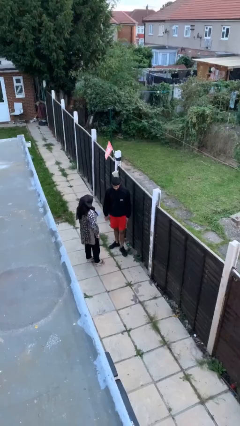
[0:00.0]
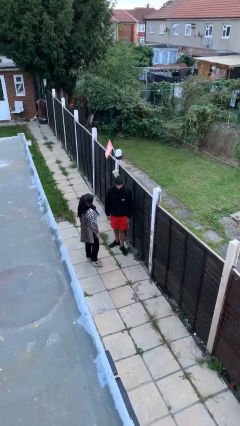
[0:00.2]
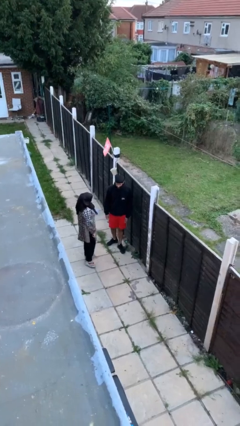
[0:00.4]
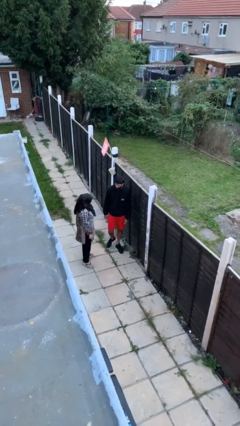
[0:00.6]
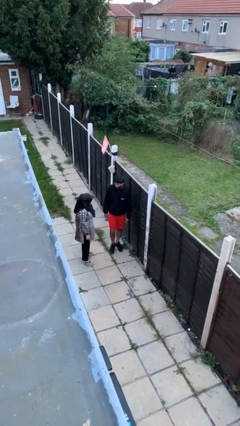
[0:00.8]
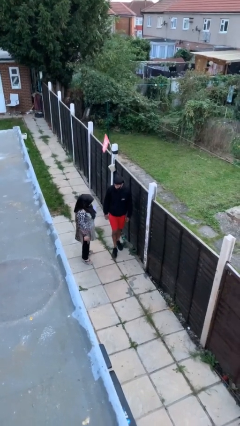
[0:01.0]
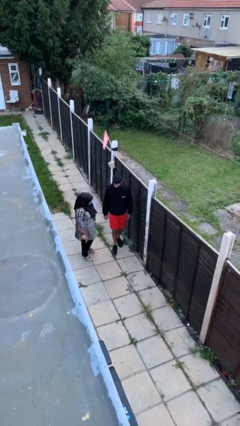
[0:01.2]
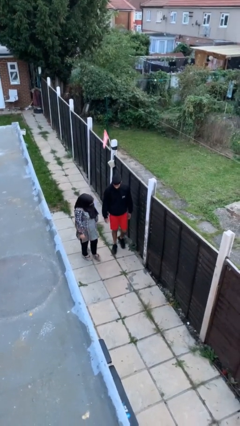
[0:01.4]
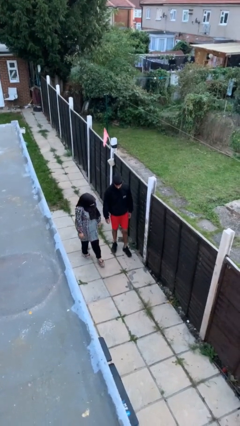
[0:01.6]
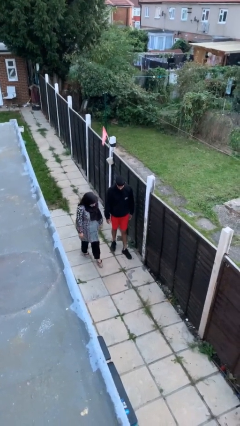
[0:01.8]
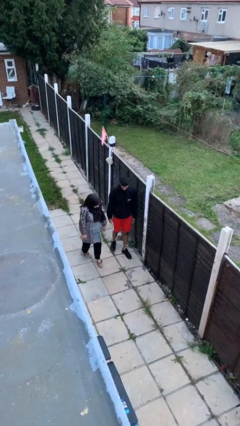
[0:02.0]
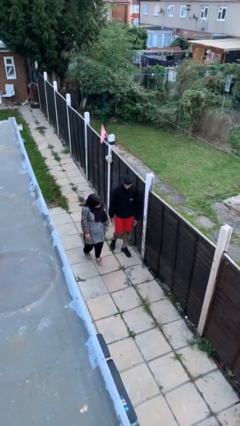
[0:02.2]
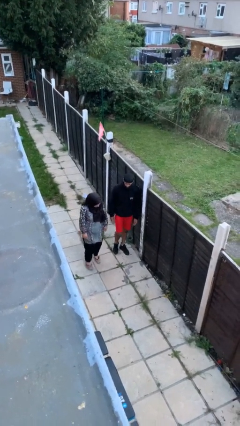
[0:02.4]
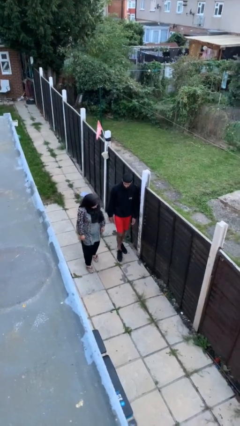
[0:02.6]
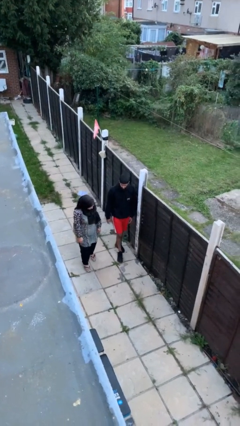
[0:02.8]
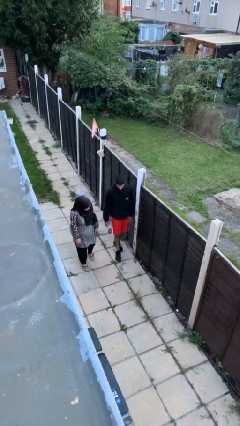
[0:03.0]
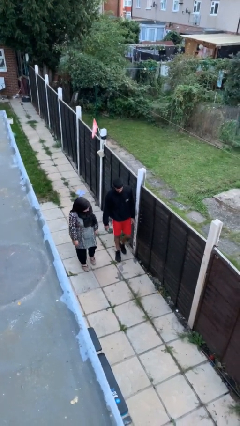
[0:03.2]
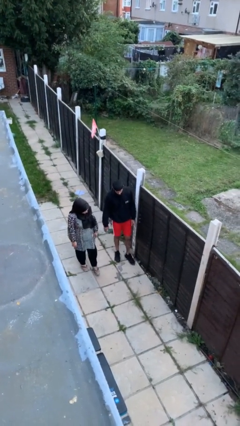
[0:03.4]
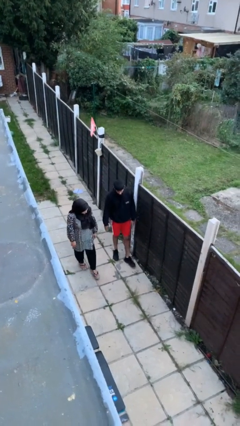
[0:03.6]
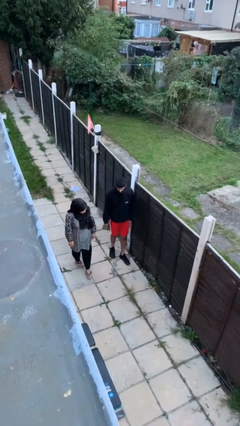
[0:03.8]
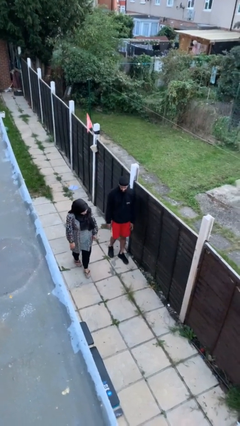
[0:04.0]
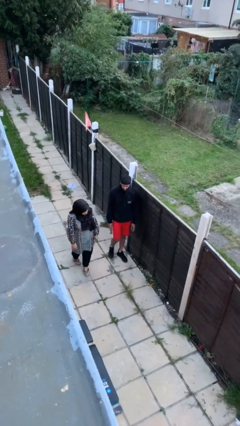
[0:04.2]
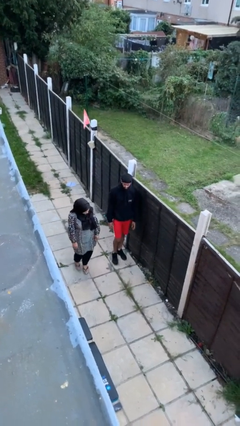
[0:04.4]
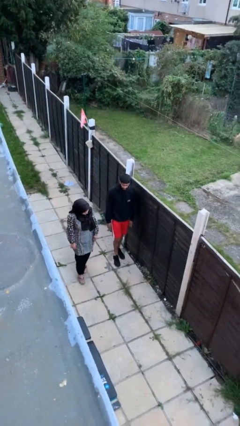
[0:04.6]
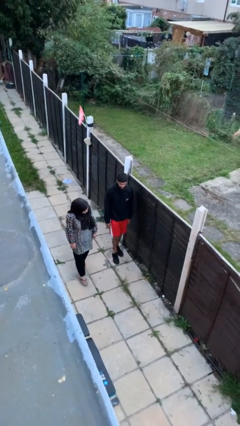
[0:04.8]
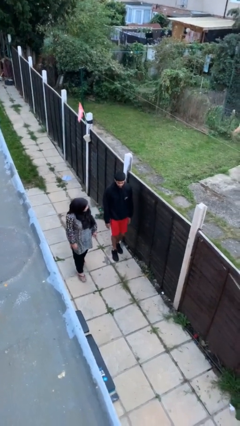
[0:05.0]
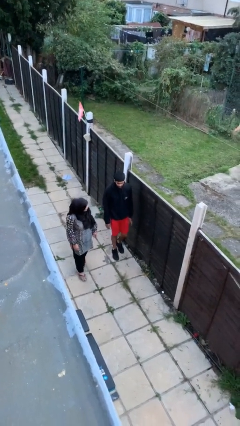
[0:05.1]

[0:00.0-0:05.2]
person talks to person

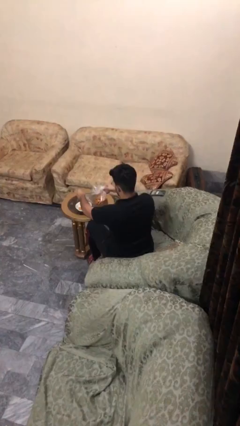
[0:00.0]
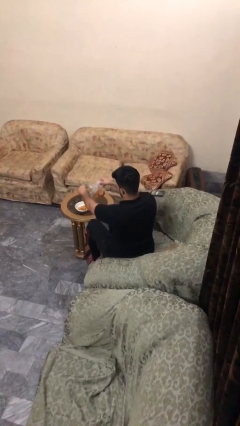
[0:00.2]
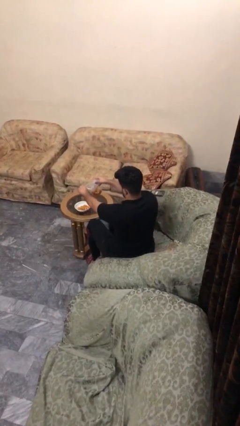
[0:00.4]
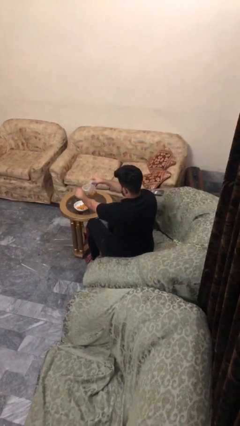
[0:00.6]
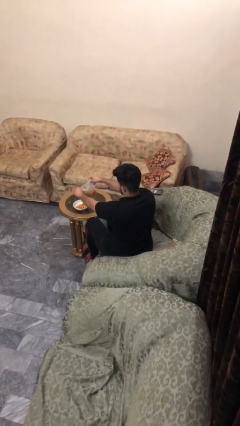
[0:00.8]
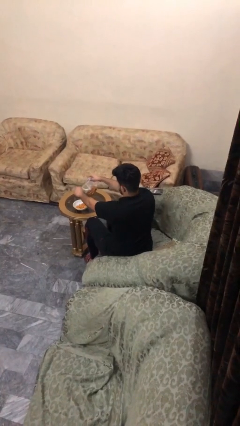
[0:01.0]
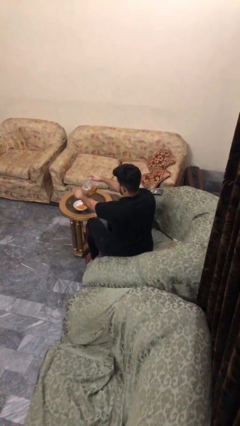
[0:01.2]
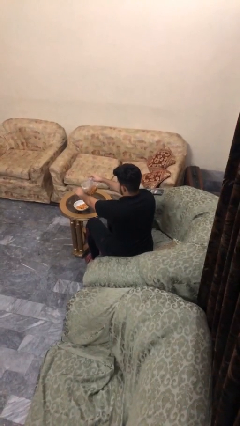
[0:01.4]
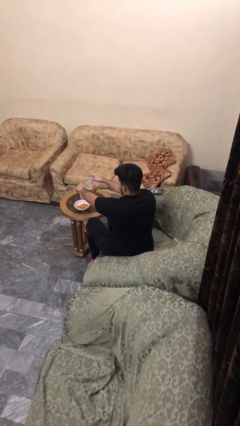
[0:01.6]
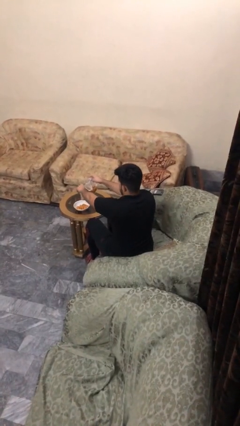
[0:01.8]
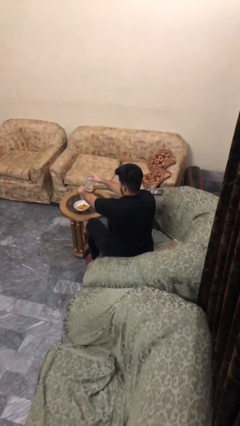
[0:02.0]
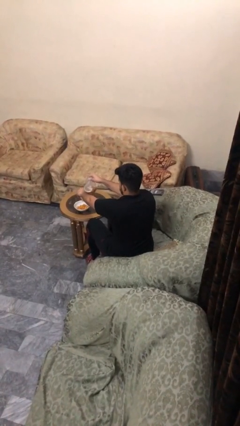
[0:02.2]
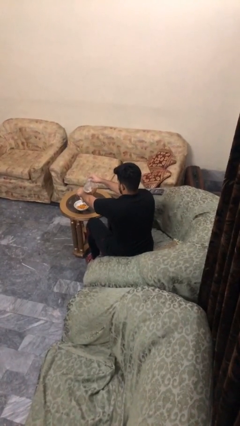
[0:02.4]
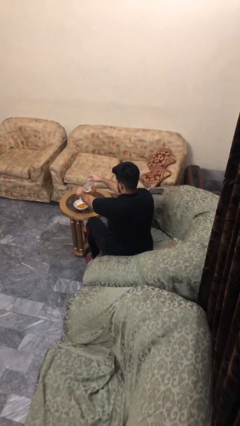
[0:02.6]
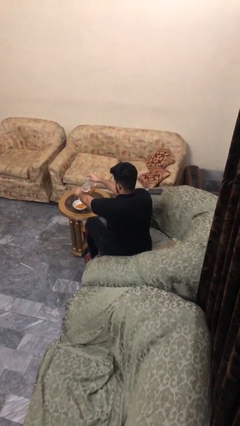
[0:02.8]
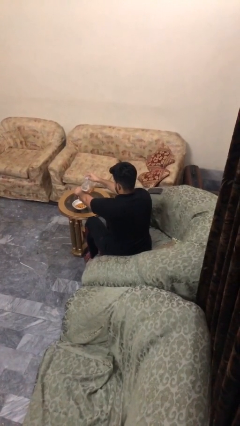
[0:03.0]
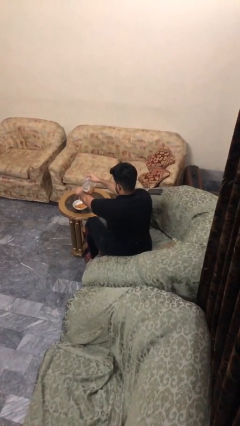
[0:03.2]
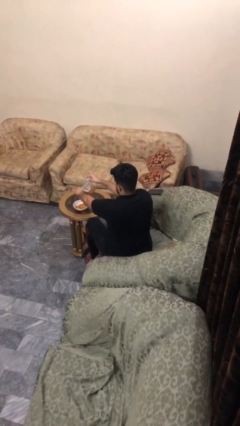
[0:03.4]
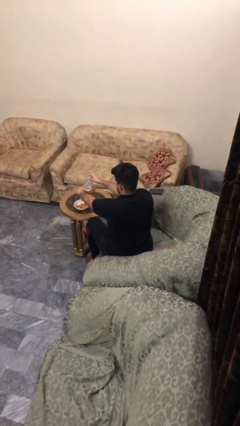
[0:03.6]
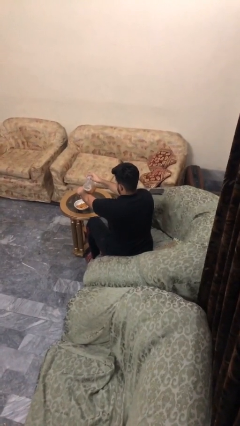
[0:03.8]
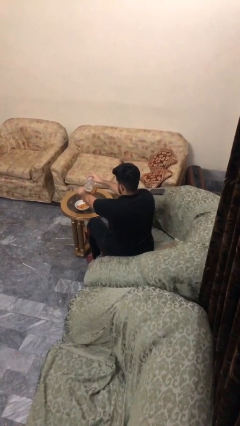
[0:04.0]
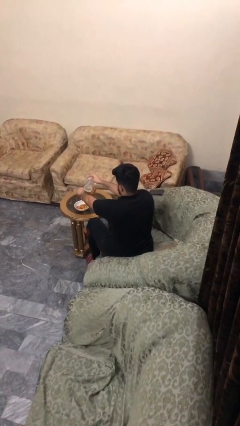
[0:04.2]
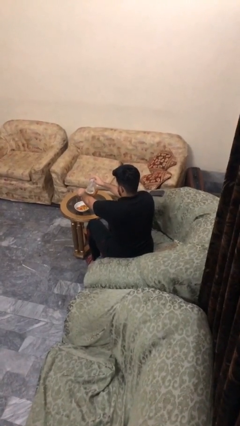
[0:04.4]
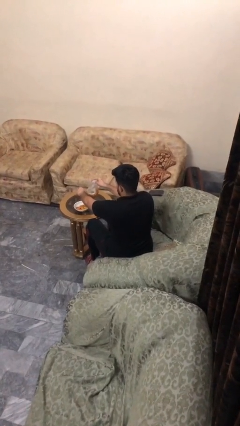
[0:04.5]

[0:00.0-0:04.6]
person pours into bowl

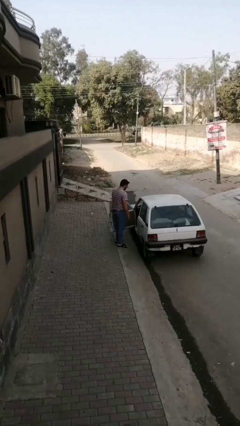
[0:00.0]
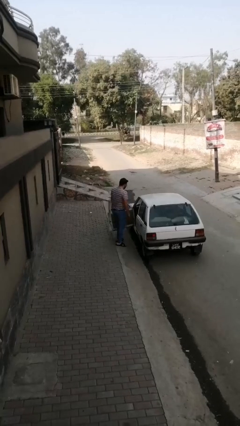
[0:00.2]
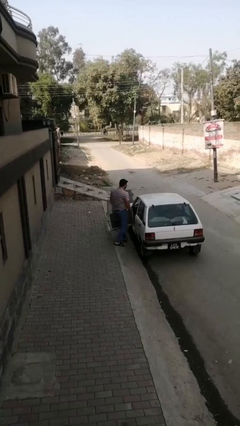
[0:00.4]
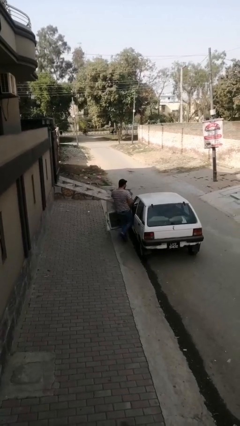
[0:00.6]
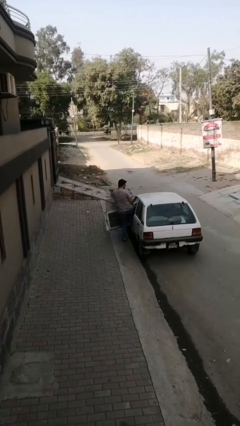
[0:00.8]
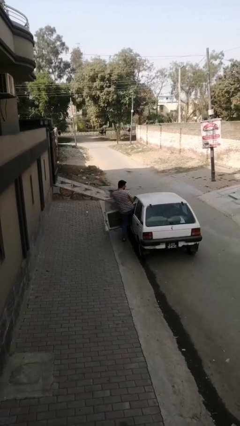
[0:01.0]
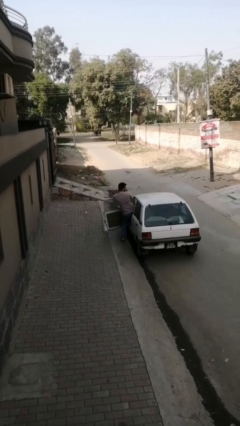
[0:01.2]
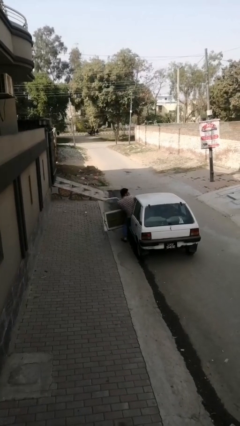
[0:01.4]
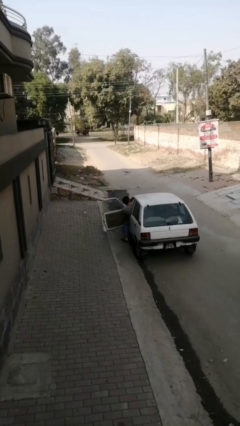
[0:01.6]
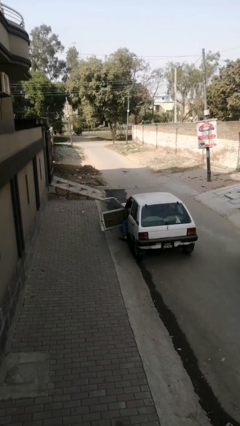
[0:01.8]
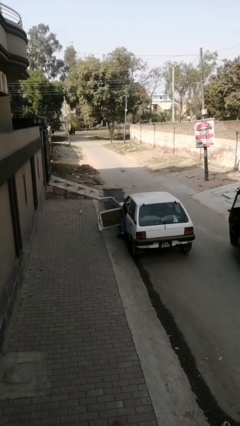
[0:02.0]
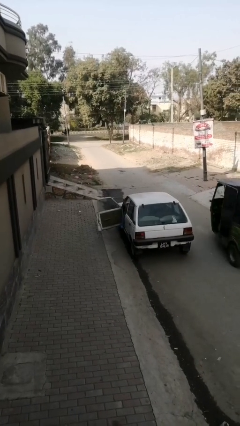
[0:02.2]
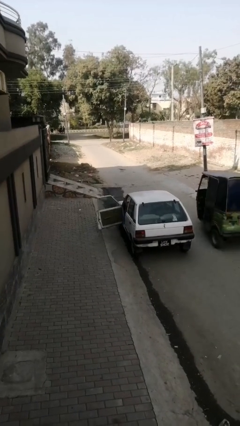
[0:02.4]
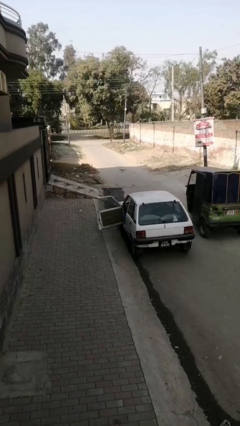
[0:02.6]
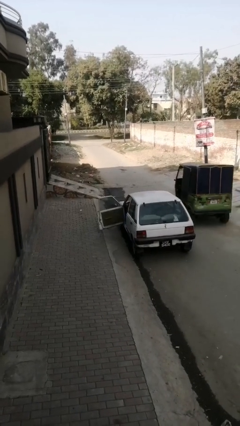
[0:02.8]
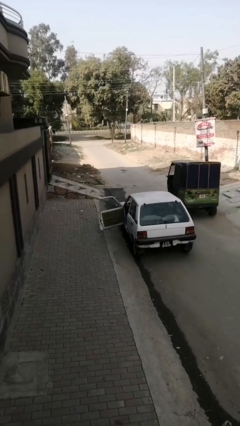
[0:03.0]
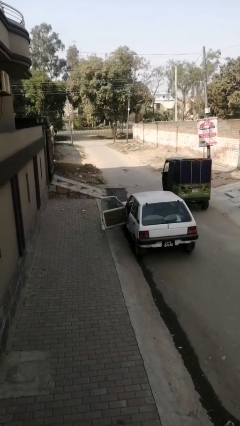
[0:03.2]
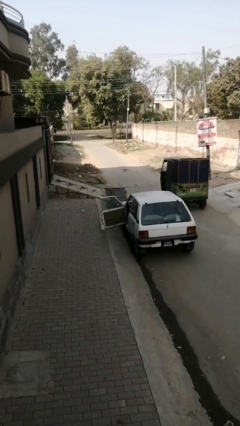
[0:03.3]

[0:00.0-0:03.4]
person enters car

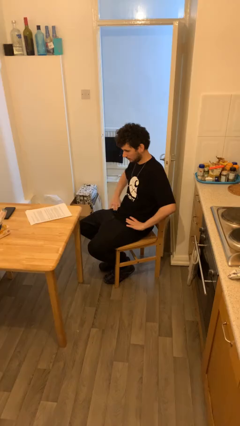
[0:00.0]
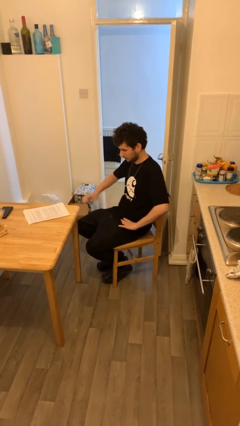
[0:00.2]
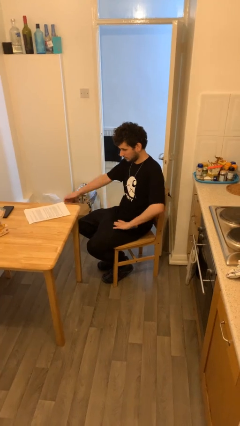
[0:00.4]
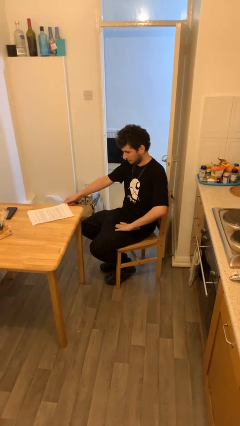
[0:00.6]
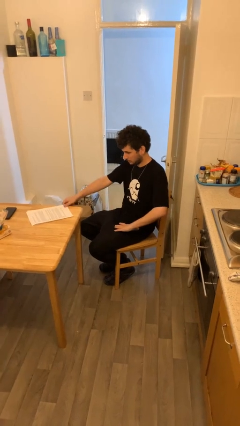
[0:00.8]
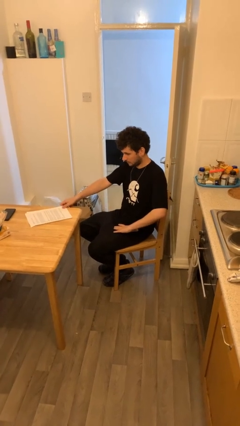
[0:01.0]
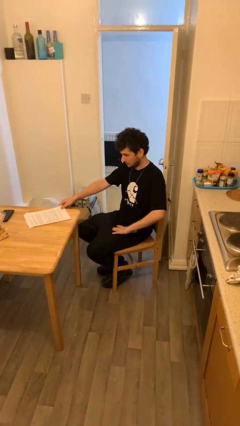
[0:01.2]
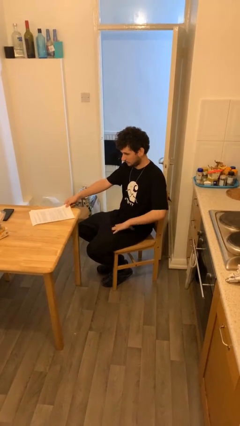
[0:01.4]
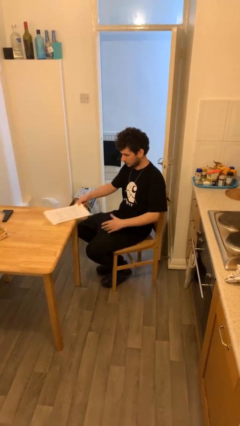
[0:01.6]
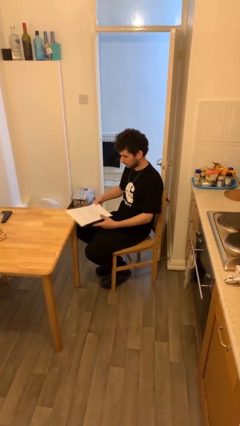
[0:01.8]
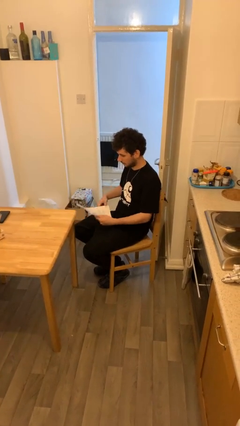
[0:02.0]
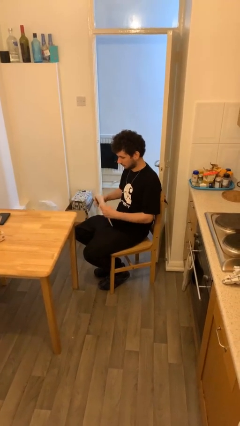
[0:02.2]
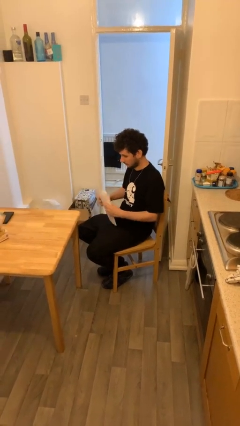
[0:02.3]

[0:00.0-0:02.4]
person picks up object from table

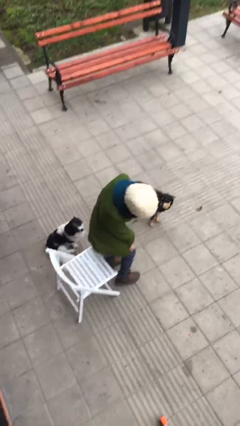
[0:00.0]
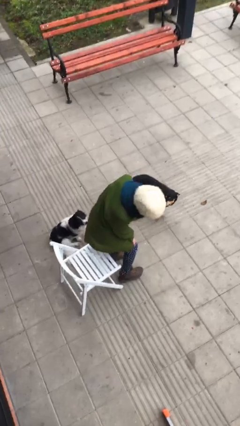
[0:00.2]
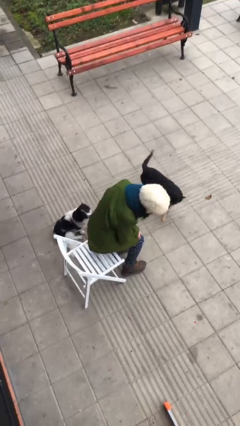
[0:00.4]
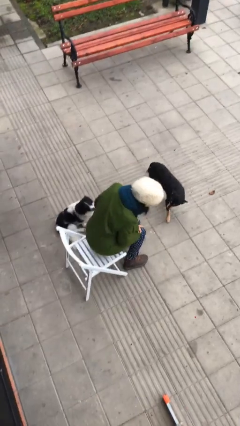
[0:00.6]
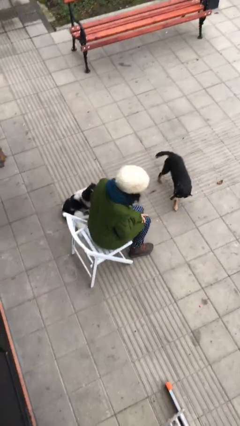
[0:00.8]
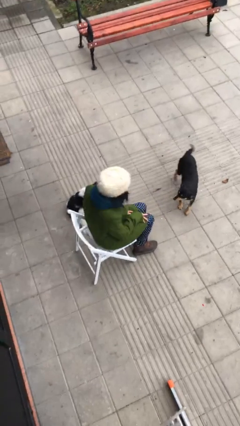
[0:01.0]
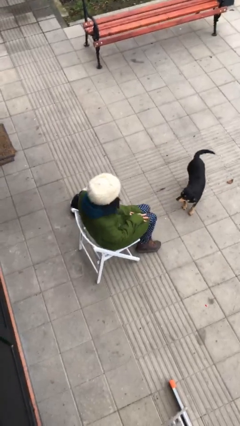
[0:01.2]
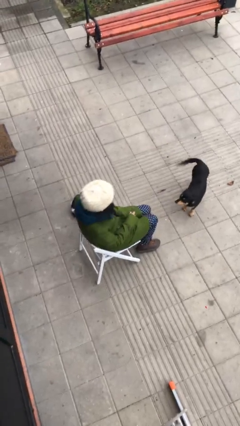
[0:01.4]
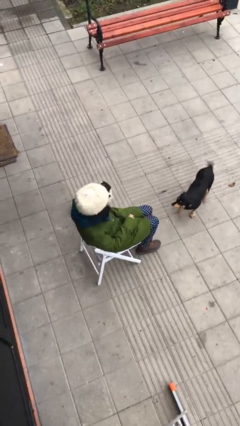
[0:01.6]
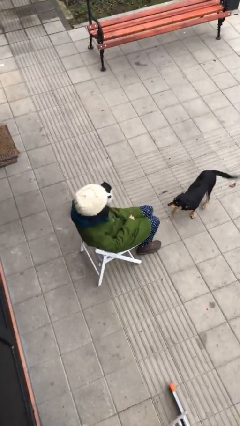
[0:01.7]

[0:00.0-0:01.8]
person sits down
